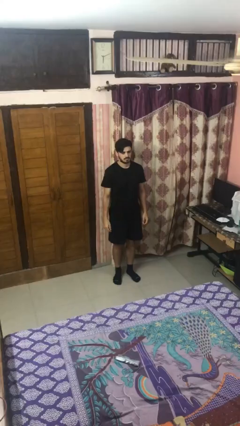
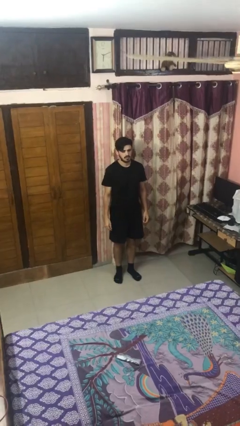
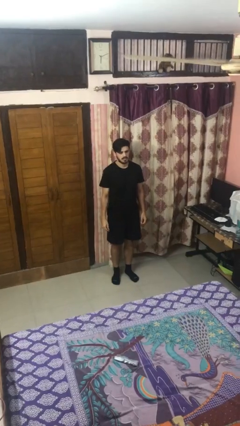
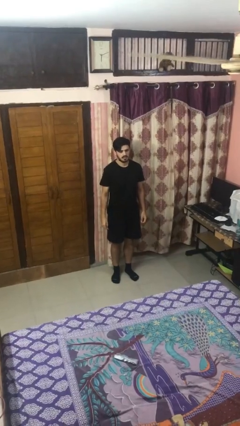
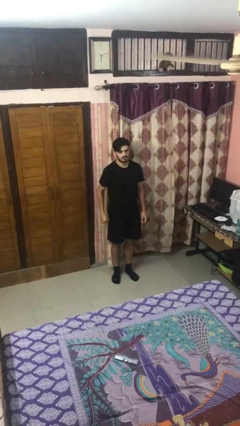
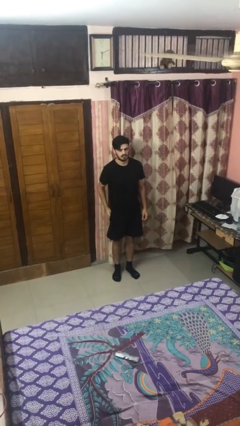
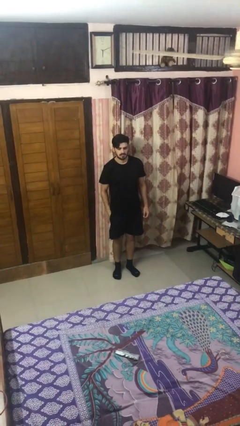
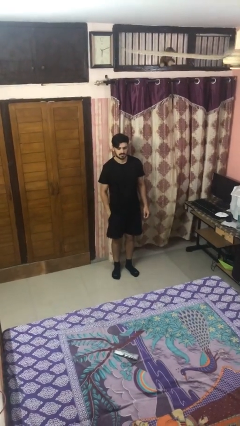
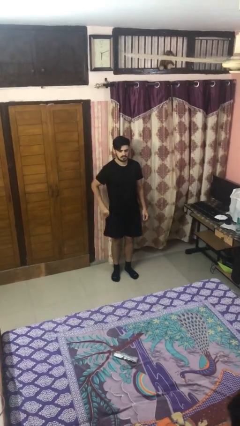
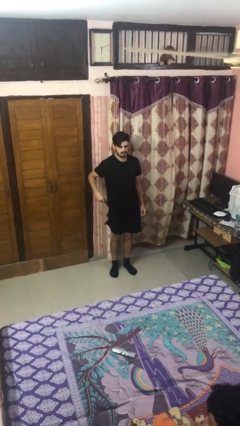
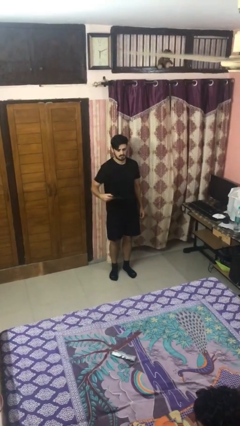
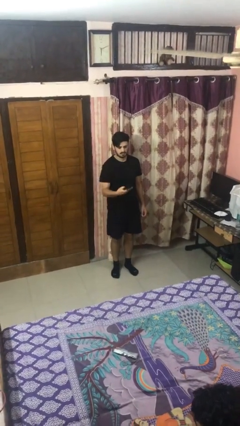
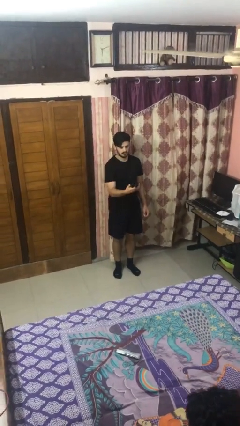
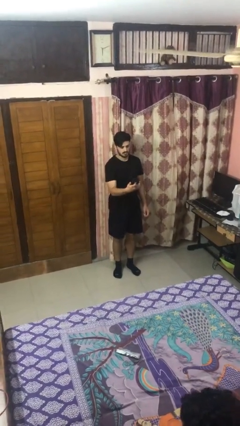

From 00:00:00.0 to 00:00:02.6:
person takes phone from pocket

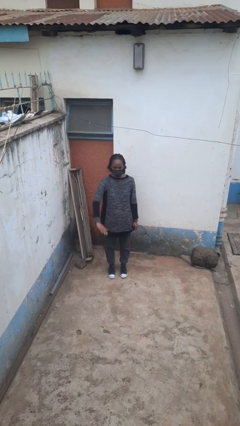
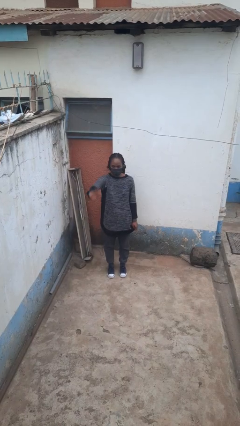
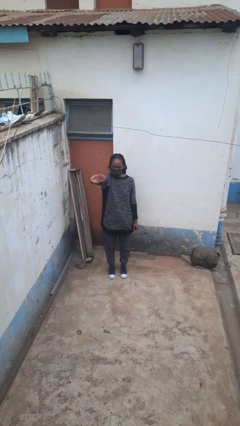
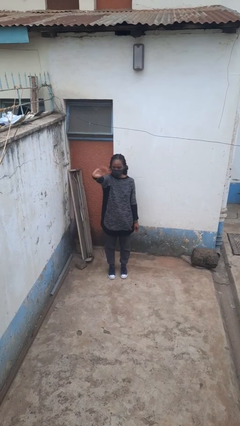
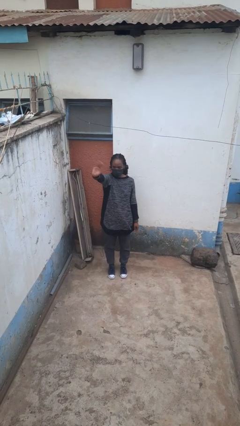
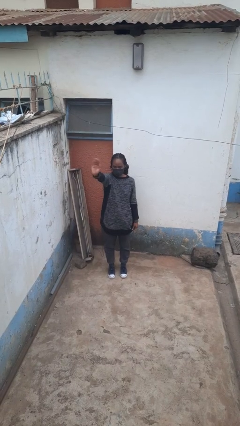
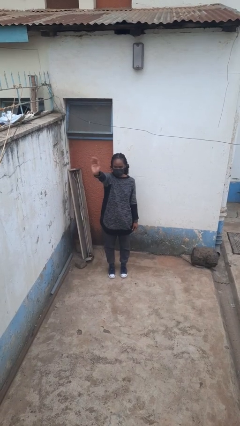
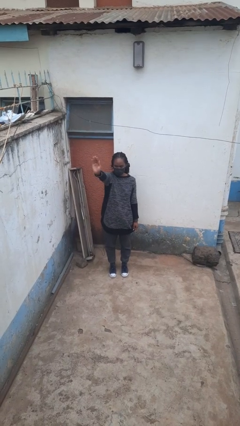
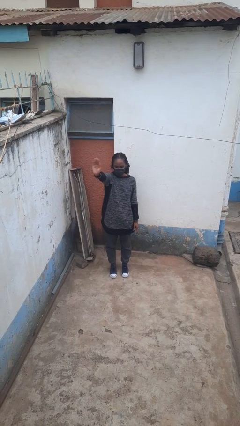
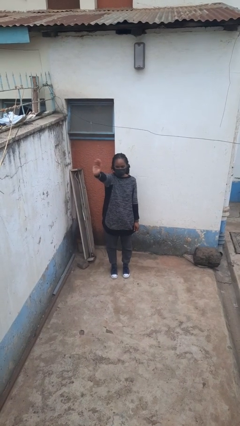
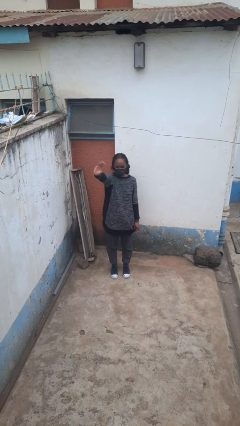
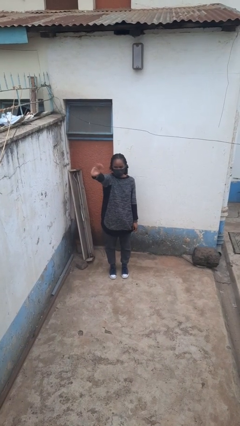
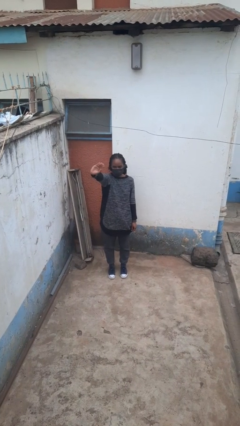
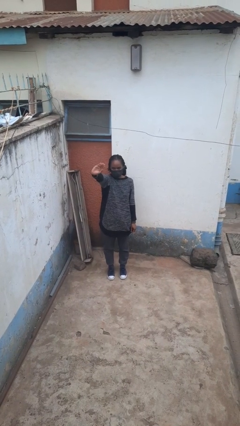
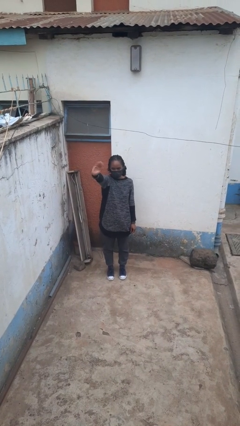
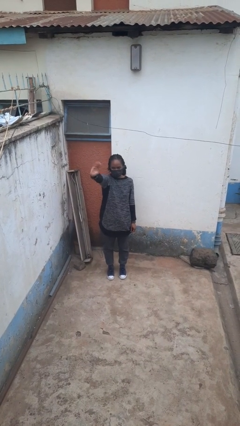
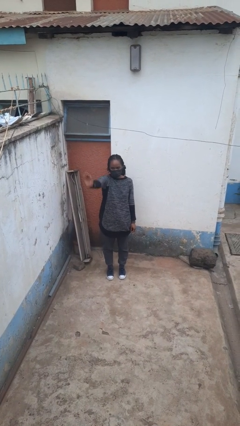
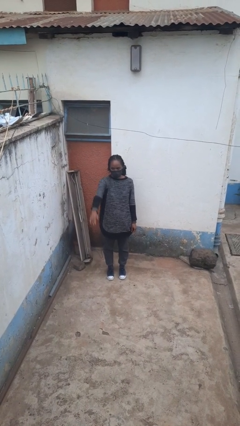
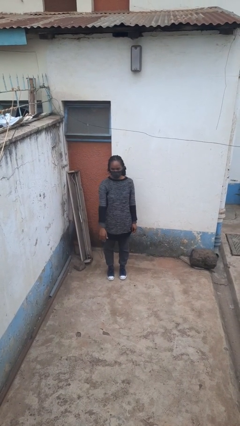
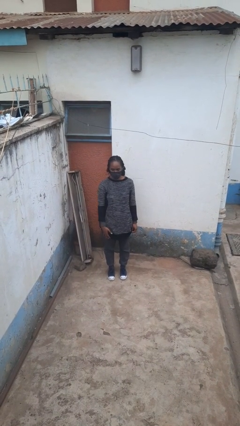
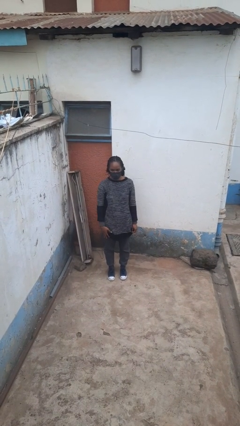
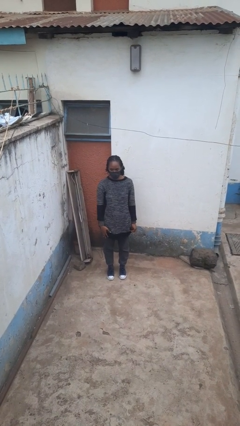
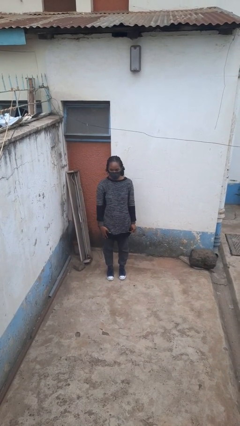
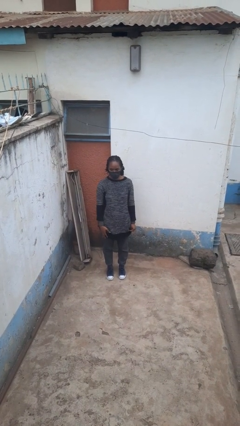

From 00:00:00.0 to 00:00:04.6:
person waves at person

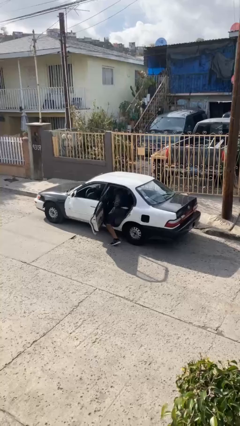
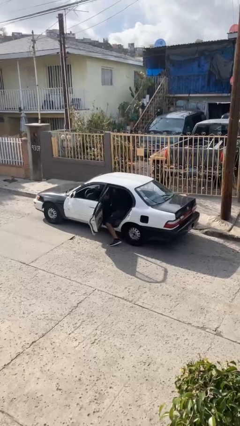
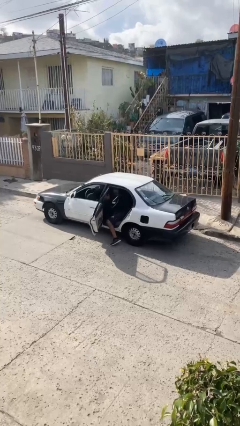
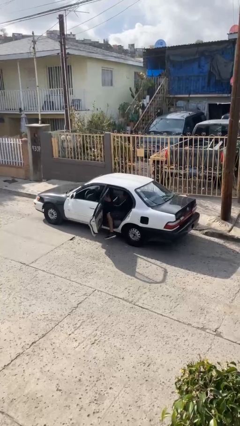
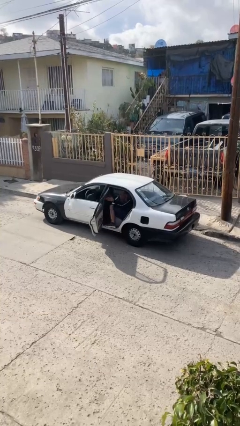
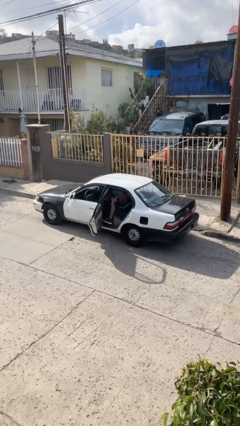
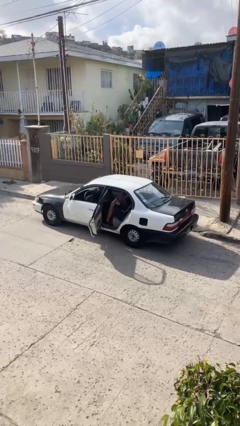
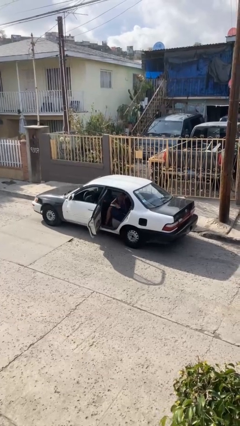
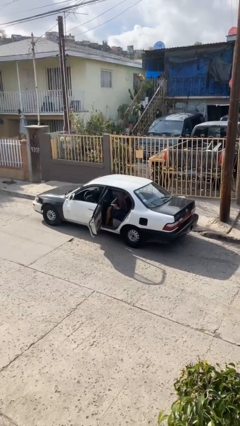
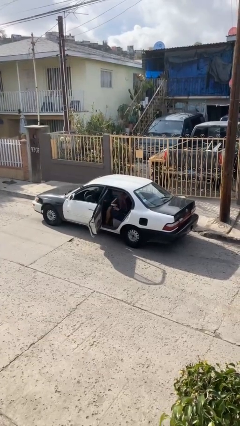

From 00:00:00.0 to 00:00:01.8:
person enters car

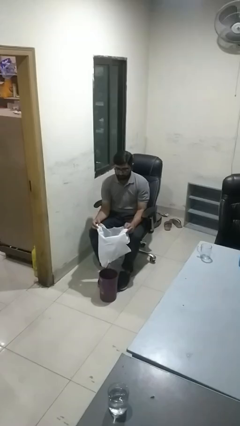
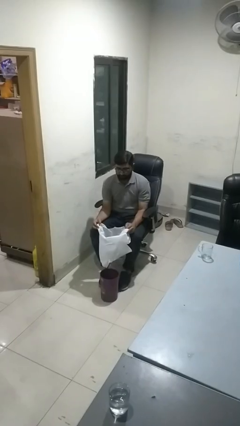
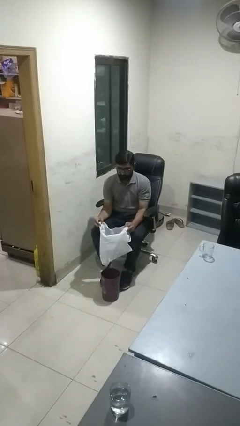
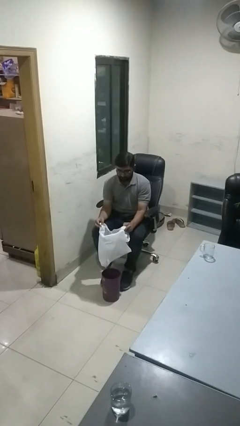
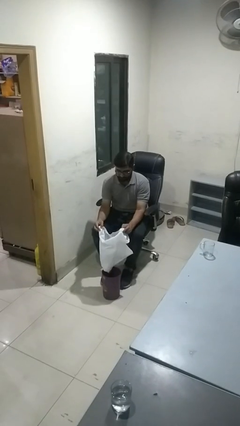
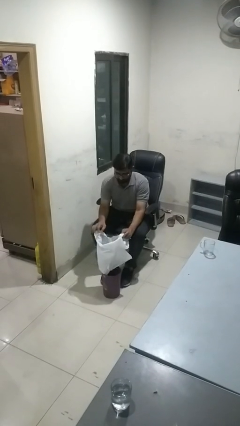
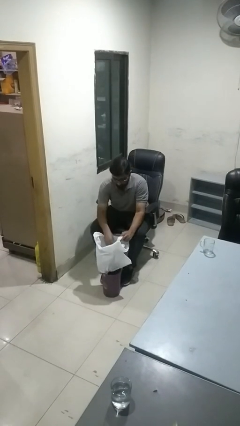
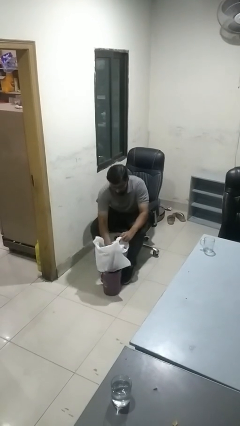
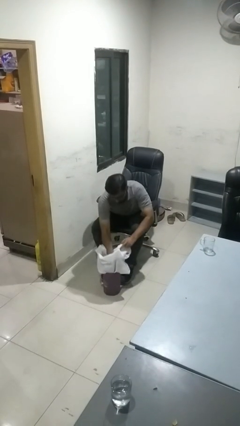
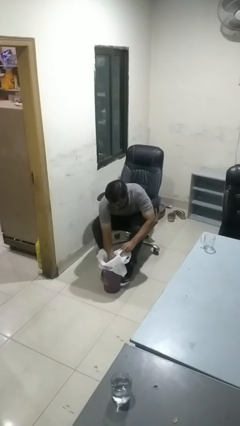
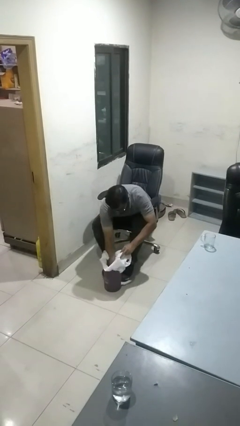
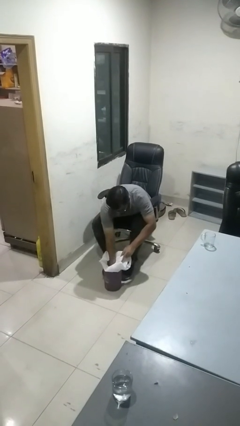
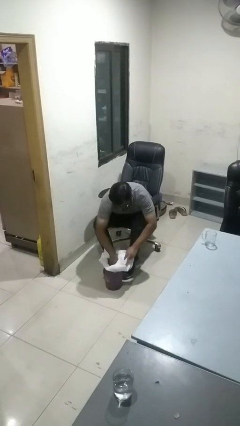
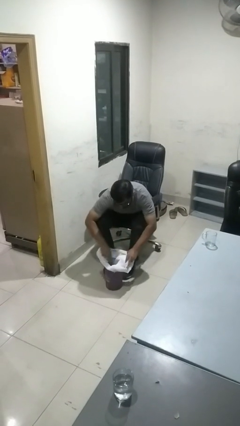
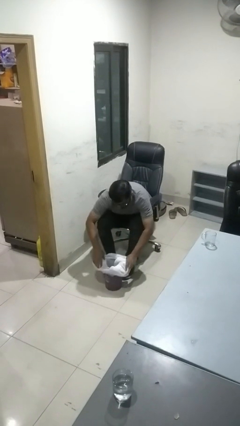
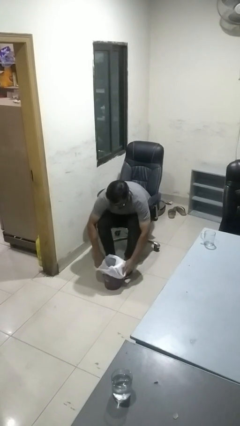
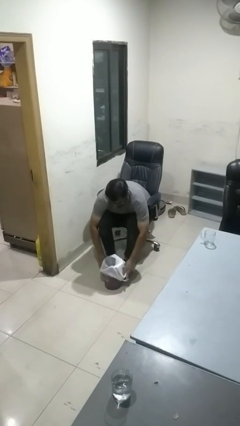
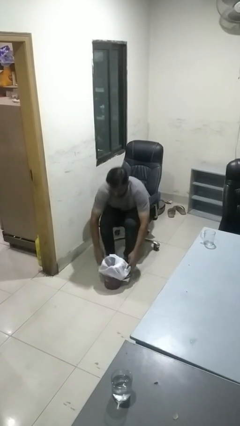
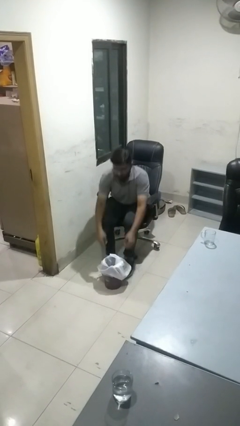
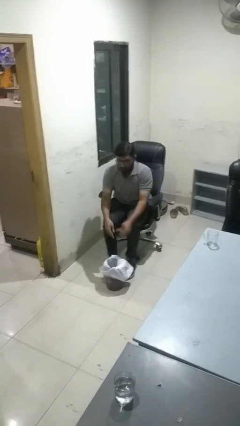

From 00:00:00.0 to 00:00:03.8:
person inserts trashbag into trashcan

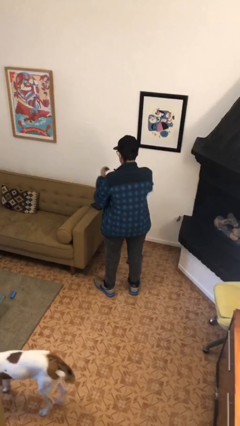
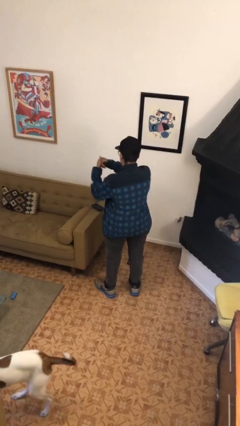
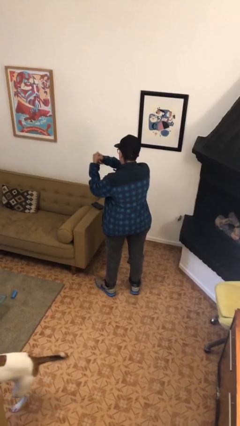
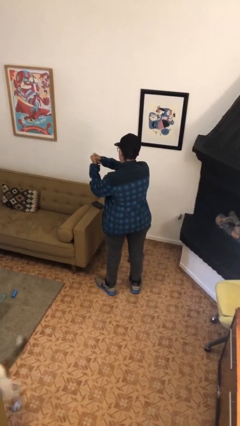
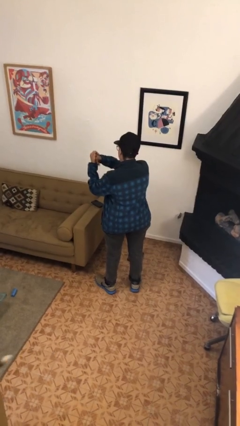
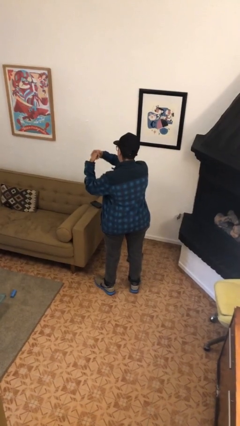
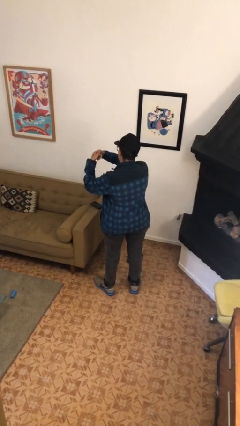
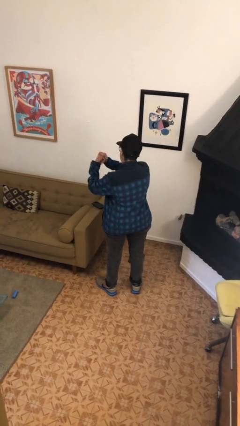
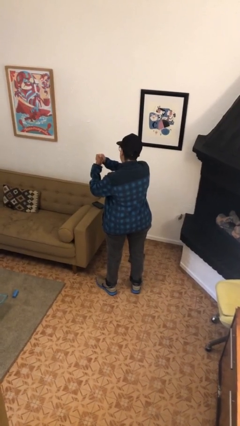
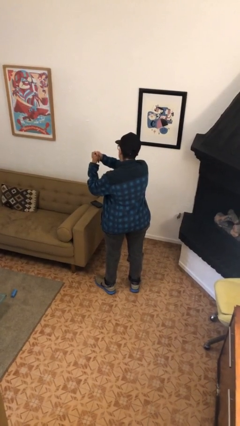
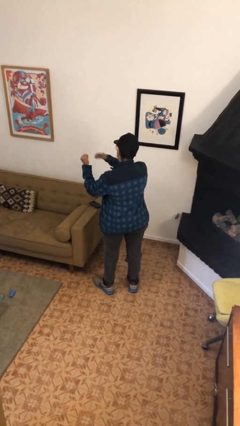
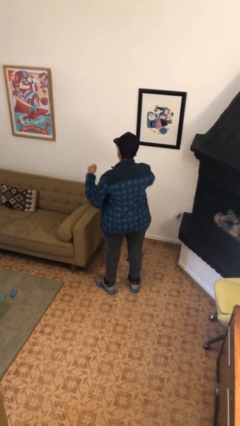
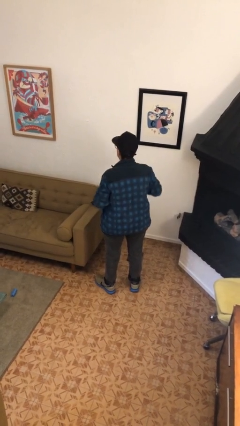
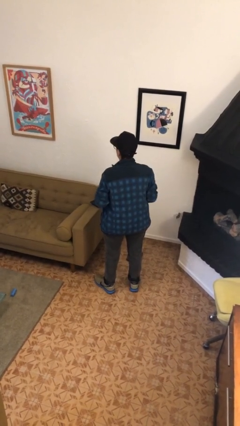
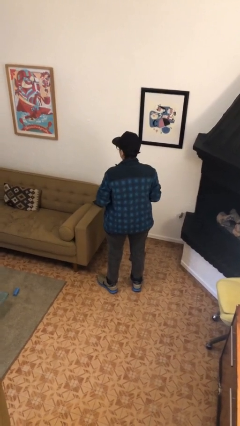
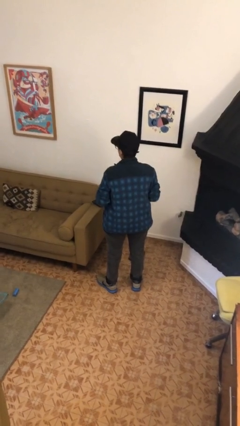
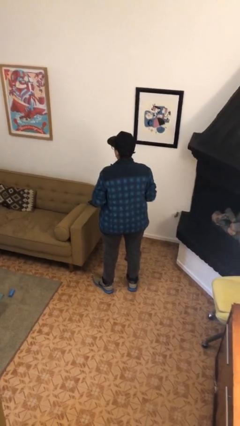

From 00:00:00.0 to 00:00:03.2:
person cracks knuckles

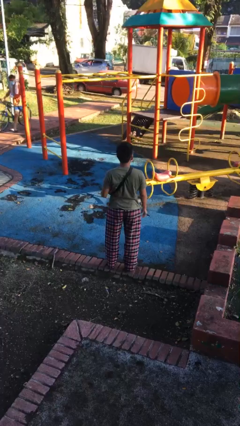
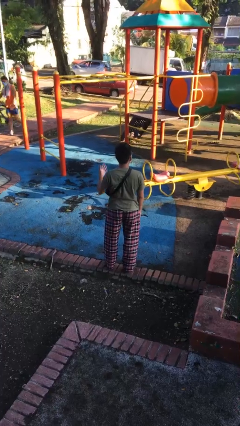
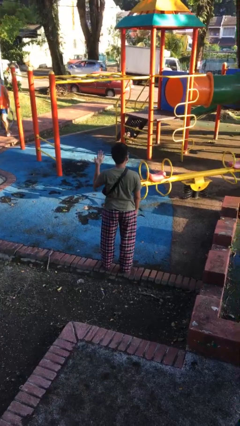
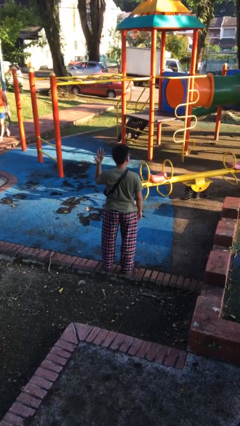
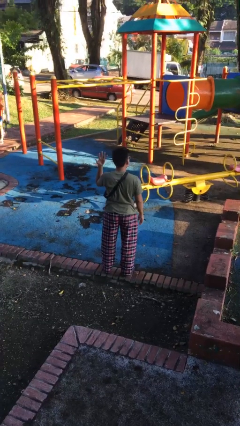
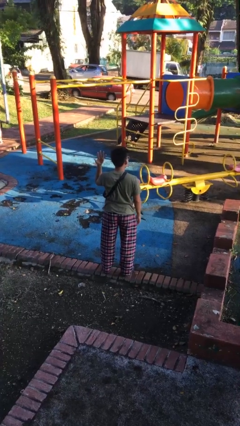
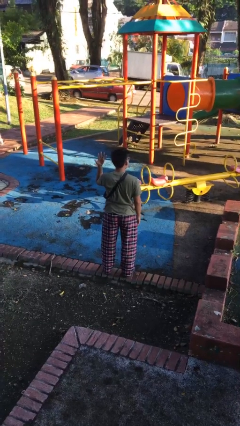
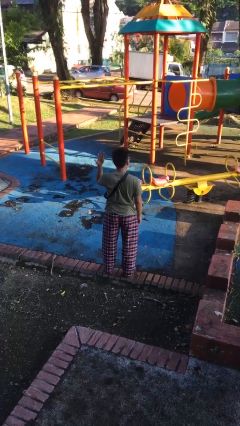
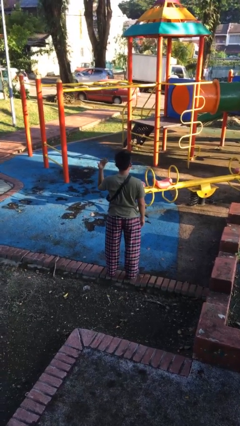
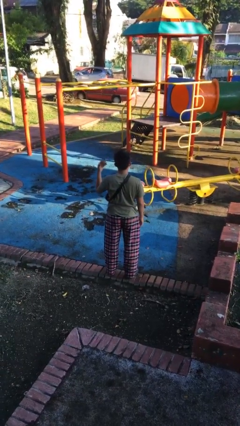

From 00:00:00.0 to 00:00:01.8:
person gestures number five
